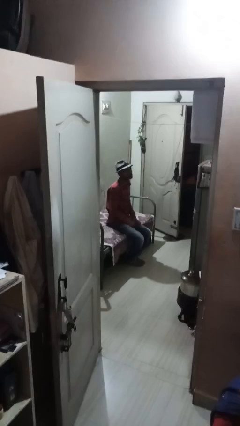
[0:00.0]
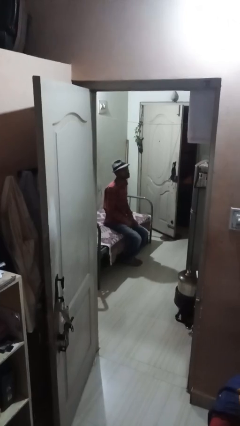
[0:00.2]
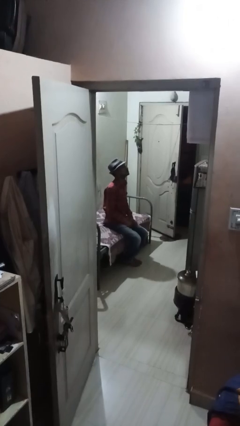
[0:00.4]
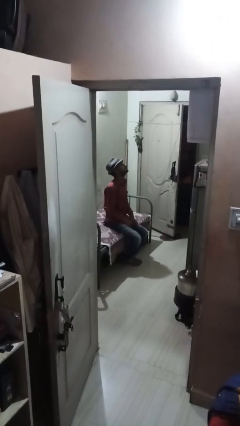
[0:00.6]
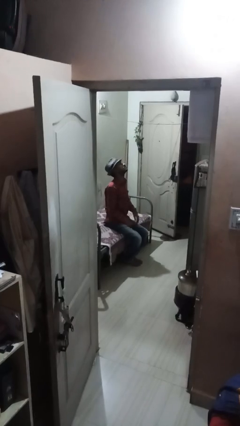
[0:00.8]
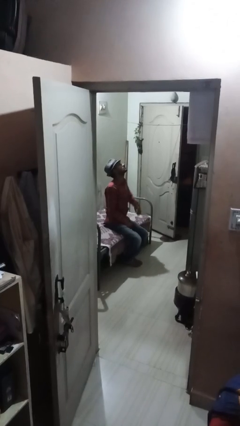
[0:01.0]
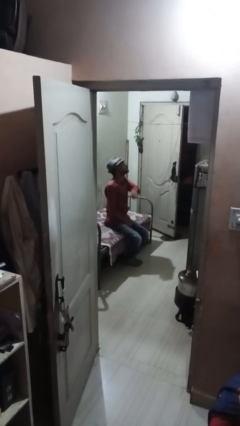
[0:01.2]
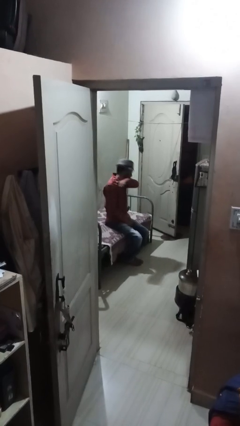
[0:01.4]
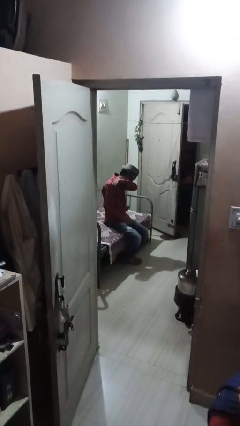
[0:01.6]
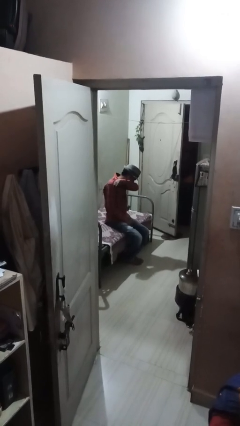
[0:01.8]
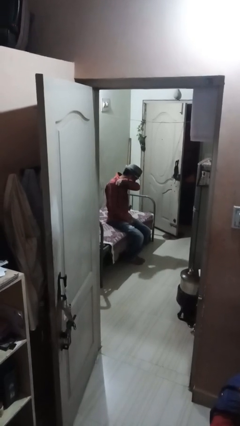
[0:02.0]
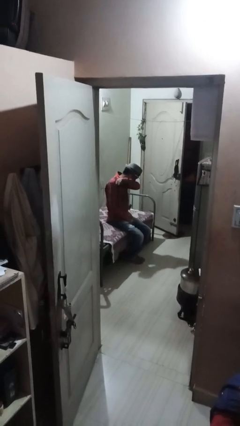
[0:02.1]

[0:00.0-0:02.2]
person sneezes into arm

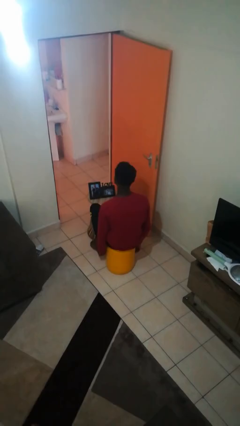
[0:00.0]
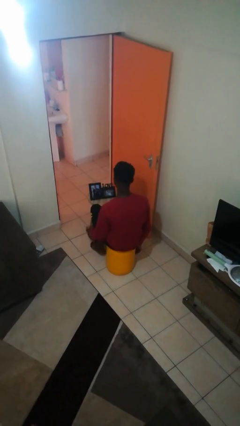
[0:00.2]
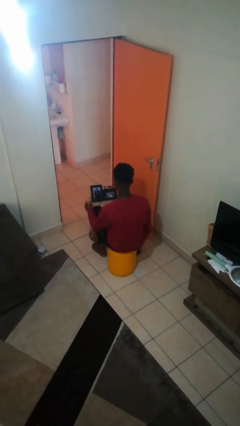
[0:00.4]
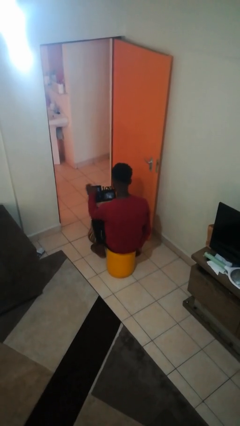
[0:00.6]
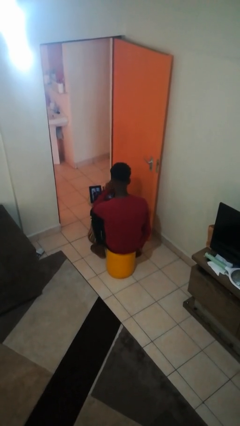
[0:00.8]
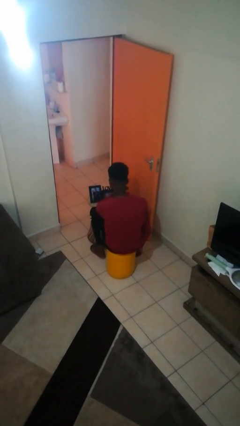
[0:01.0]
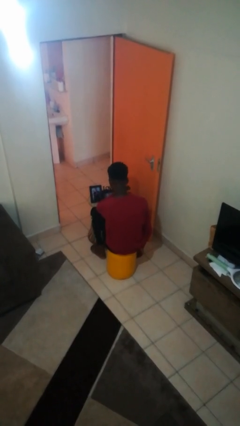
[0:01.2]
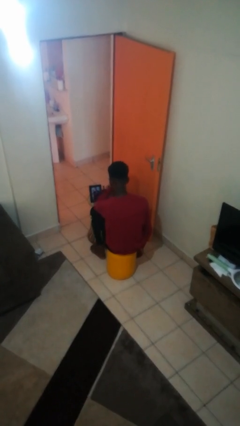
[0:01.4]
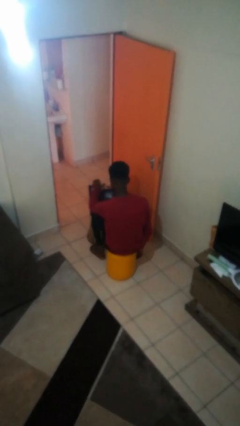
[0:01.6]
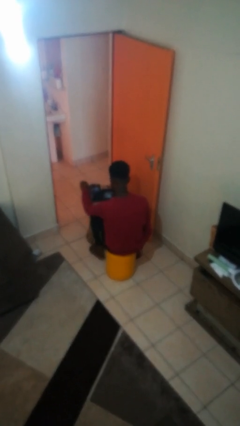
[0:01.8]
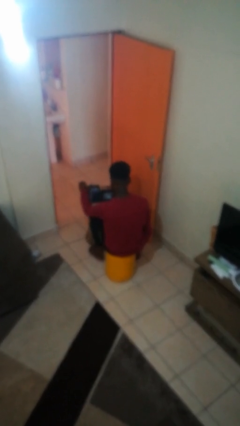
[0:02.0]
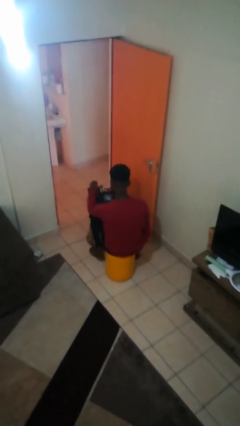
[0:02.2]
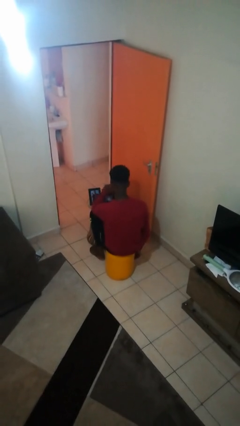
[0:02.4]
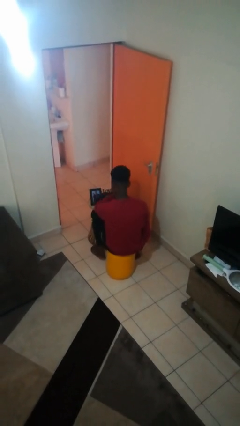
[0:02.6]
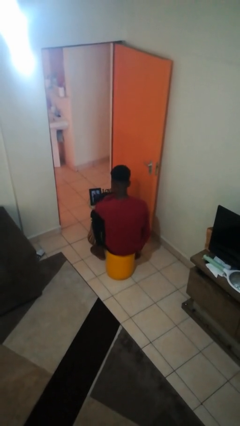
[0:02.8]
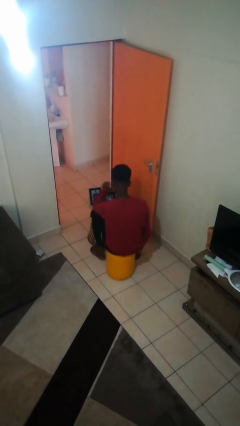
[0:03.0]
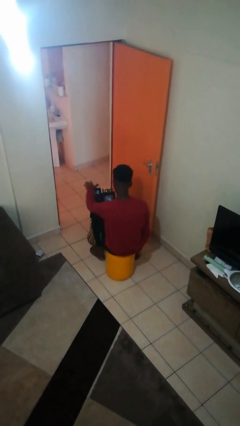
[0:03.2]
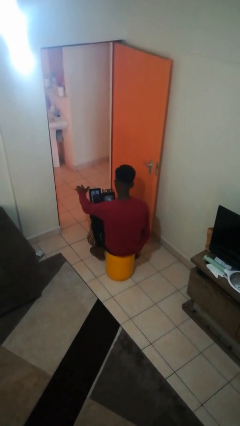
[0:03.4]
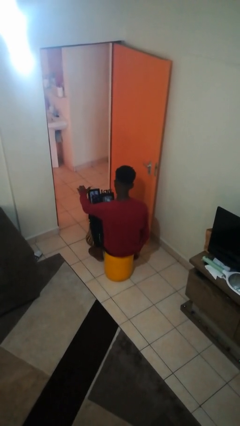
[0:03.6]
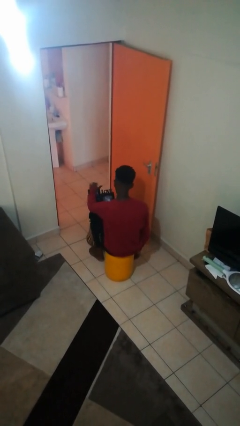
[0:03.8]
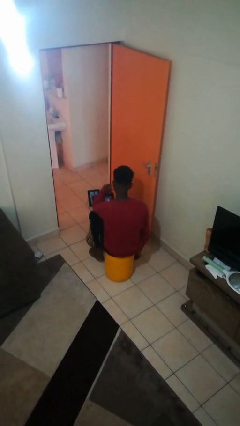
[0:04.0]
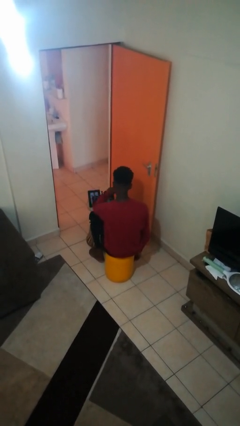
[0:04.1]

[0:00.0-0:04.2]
person waves hand over object

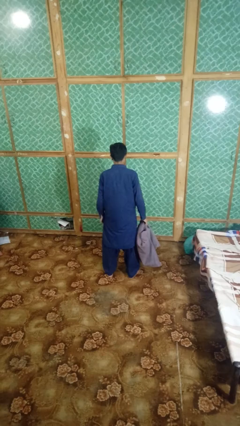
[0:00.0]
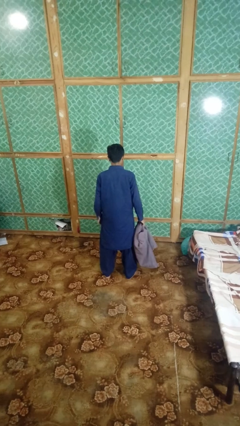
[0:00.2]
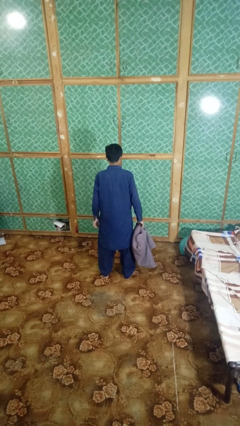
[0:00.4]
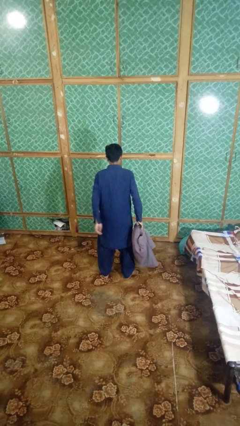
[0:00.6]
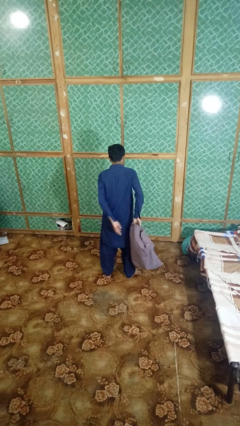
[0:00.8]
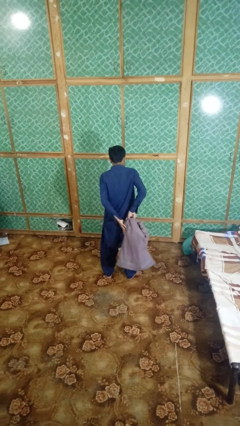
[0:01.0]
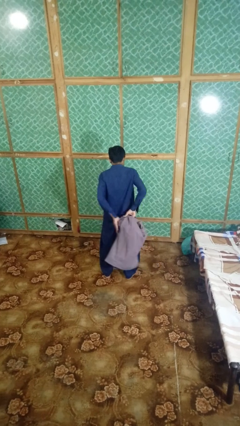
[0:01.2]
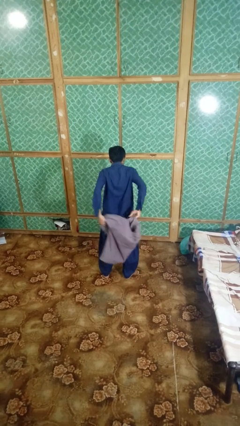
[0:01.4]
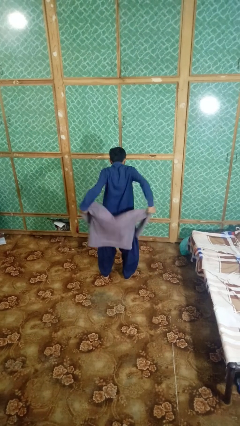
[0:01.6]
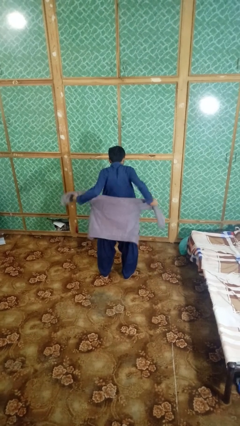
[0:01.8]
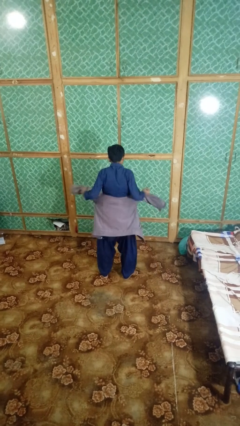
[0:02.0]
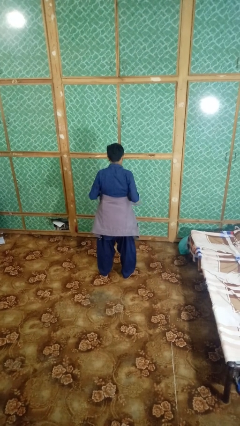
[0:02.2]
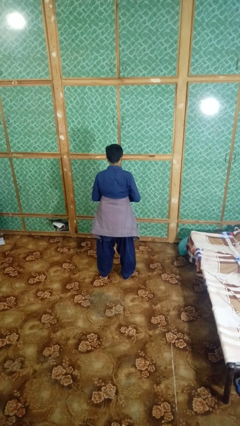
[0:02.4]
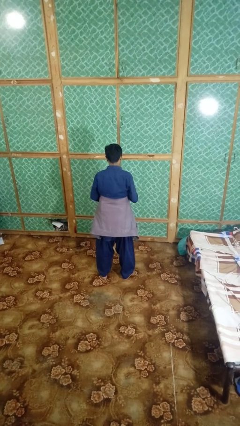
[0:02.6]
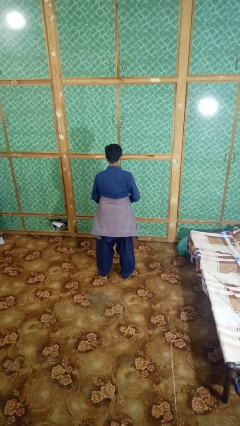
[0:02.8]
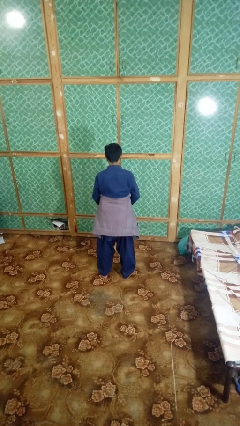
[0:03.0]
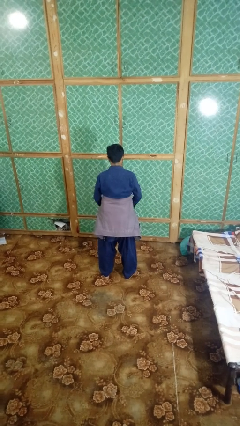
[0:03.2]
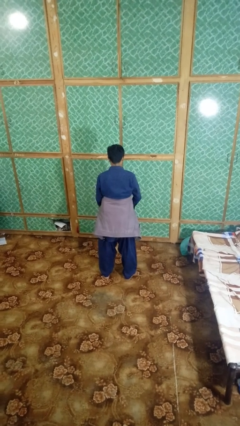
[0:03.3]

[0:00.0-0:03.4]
person ties jacket around waist

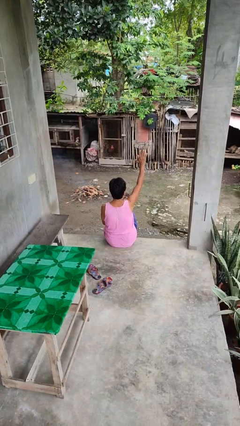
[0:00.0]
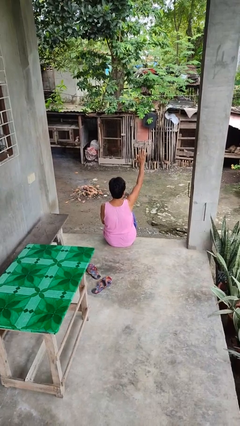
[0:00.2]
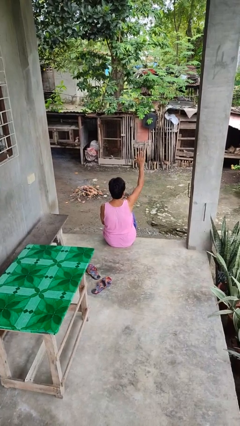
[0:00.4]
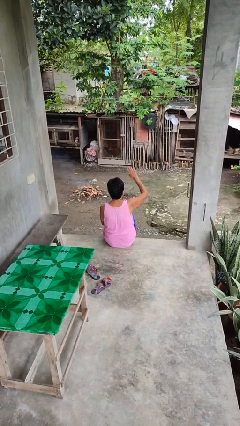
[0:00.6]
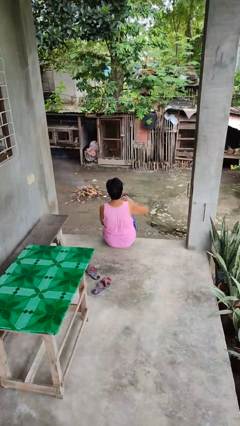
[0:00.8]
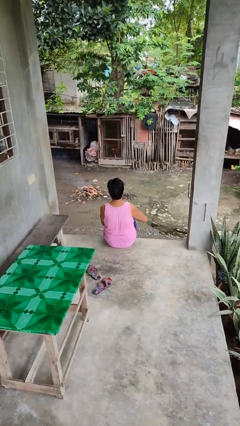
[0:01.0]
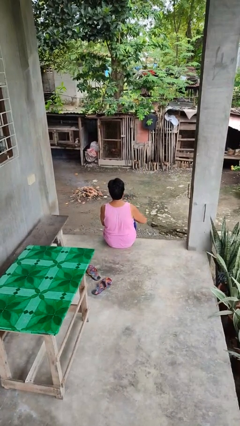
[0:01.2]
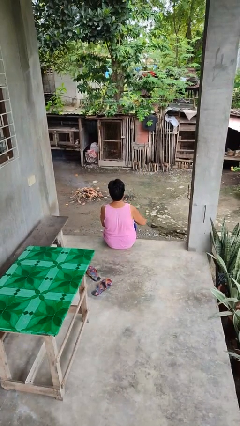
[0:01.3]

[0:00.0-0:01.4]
person gestures swipe down

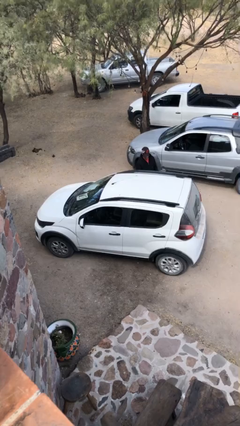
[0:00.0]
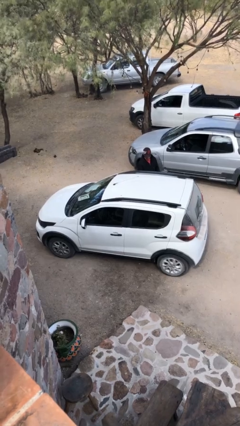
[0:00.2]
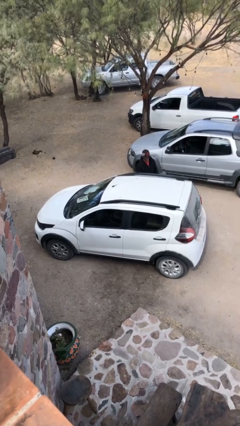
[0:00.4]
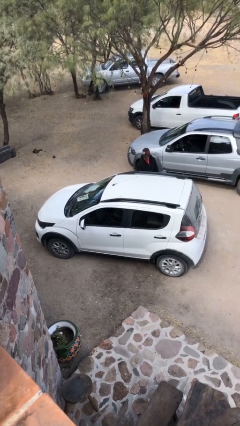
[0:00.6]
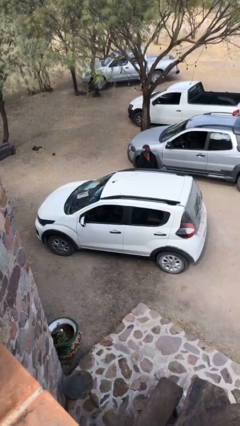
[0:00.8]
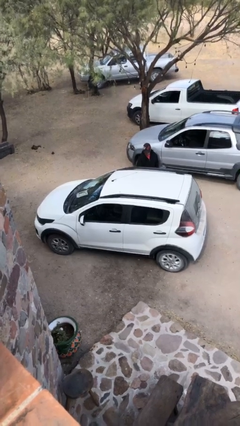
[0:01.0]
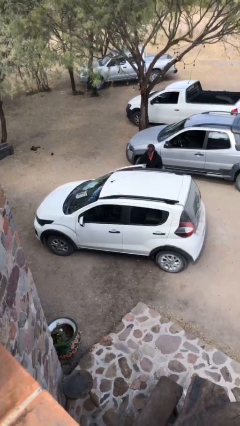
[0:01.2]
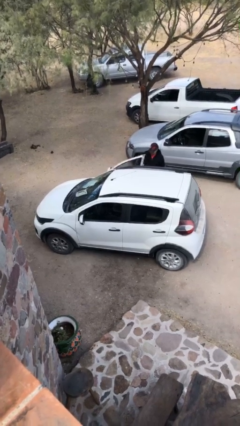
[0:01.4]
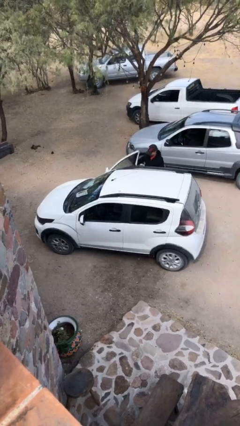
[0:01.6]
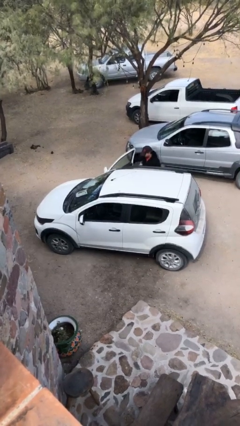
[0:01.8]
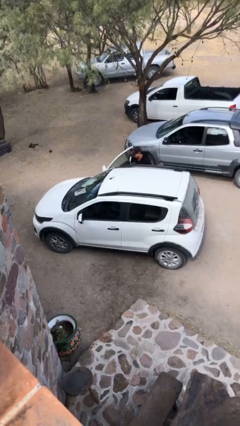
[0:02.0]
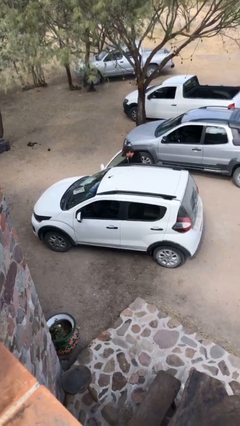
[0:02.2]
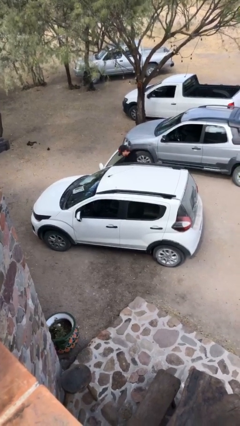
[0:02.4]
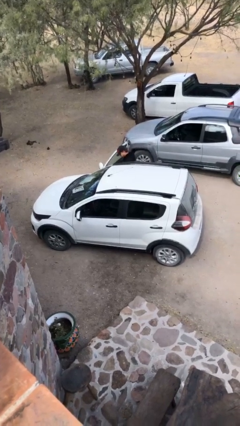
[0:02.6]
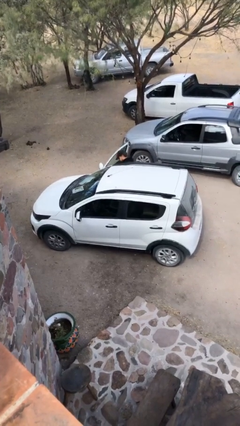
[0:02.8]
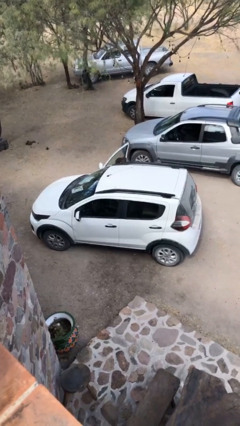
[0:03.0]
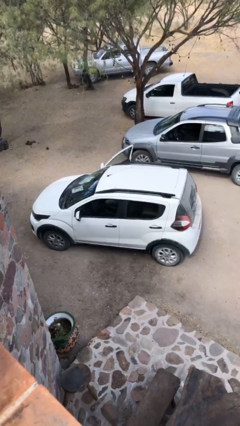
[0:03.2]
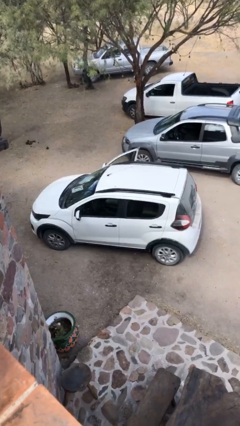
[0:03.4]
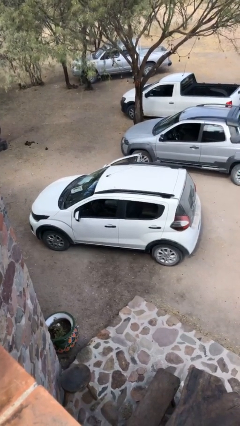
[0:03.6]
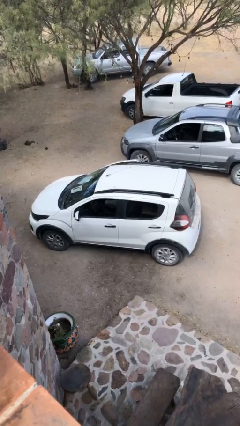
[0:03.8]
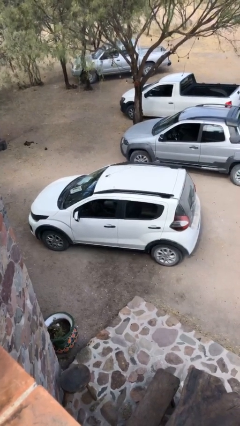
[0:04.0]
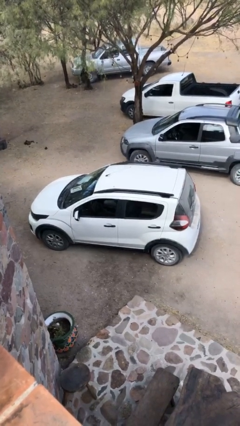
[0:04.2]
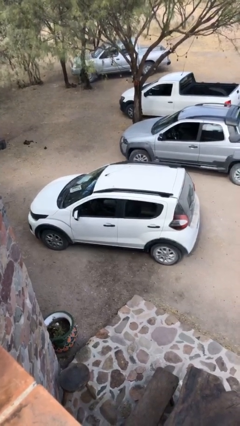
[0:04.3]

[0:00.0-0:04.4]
car picks up person

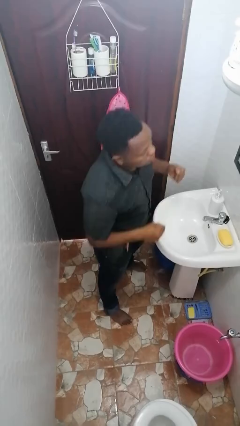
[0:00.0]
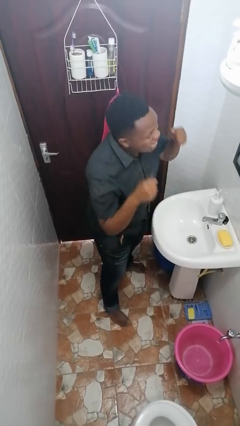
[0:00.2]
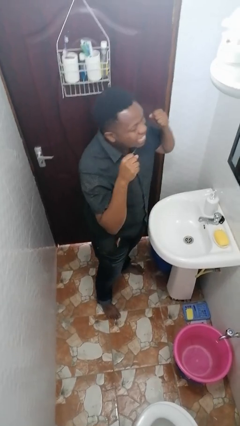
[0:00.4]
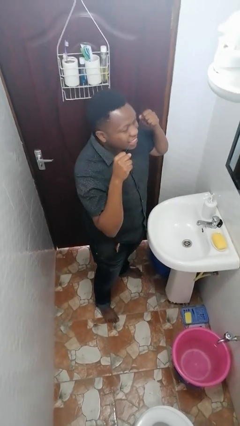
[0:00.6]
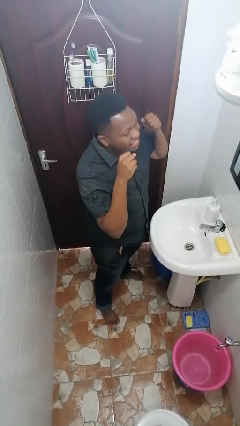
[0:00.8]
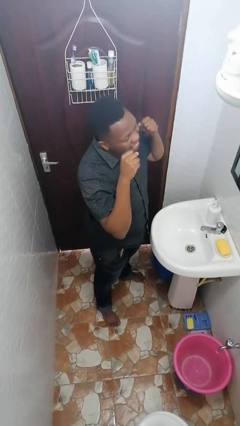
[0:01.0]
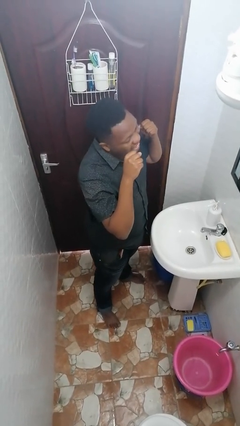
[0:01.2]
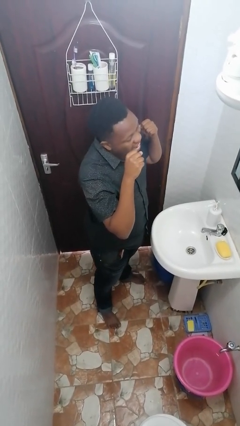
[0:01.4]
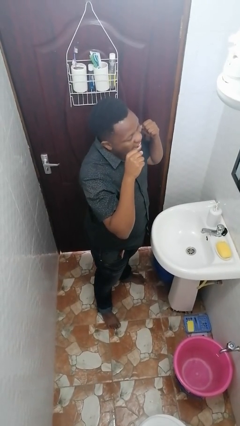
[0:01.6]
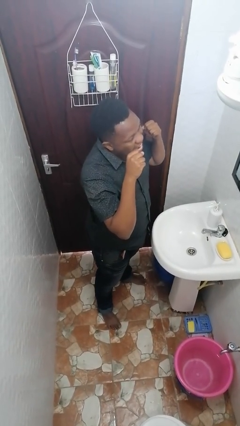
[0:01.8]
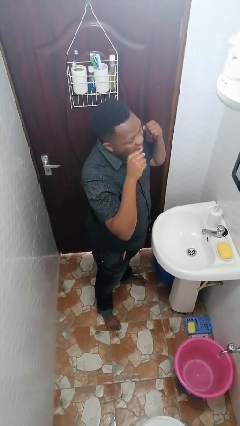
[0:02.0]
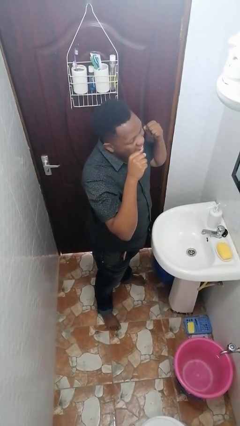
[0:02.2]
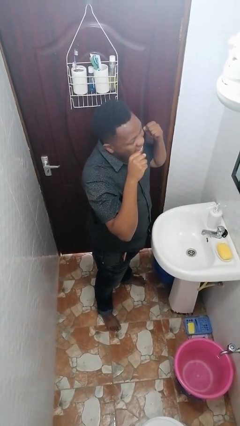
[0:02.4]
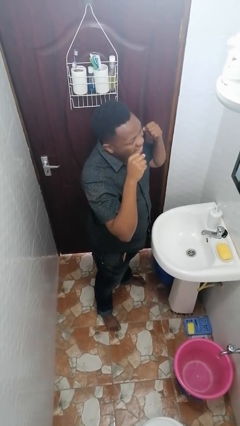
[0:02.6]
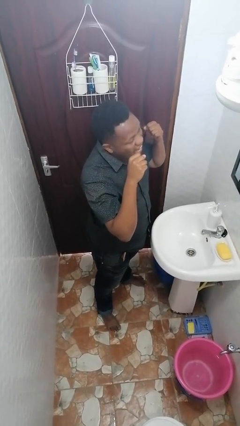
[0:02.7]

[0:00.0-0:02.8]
person flosses
